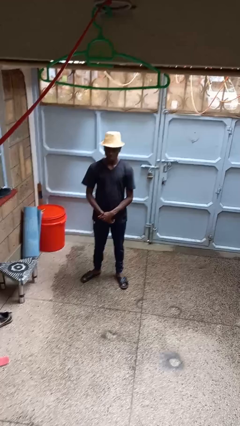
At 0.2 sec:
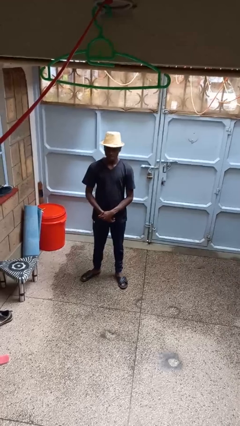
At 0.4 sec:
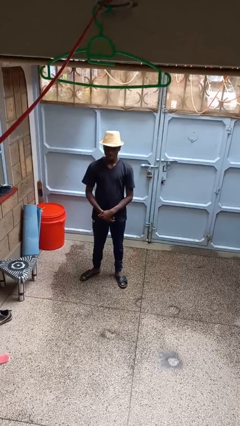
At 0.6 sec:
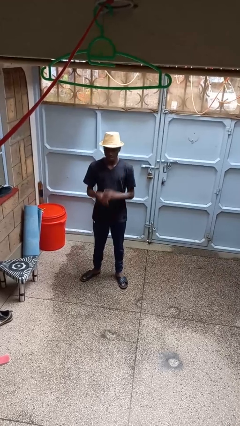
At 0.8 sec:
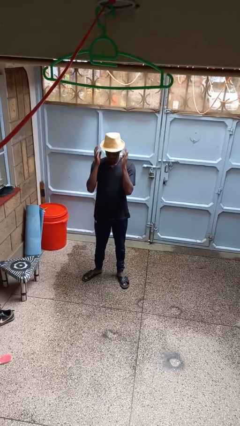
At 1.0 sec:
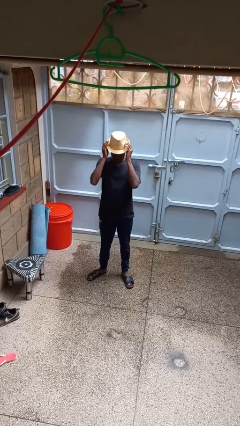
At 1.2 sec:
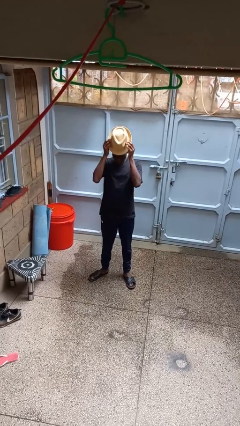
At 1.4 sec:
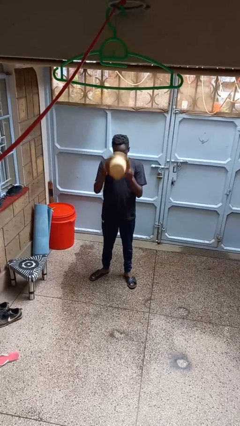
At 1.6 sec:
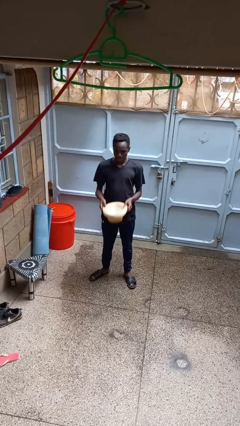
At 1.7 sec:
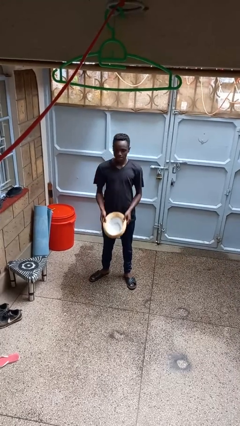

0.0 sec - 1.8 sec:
person takes off hat

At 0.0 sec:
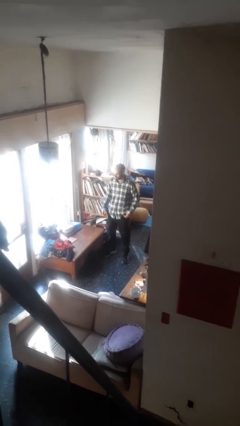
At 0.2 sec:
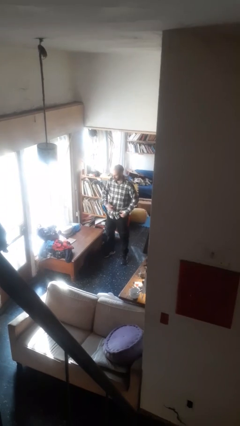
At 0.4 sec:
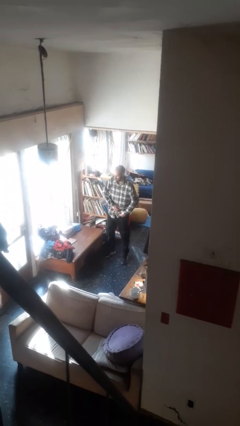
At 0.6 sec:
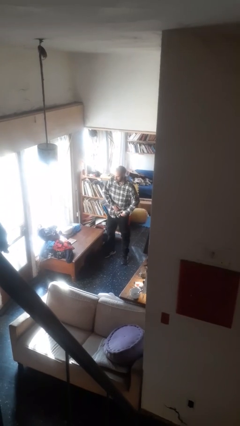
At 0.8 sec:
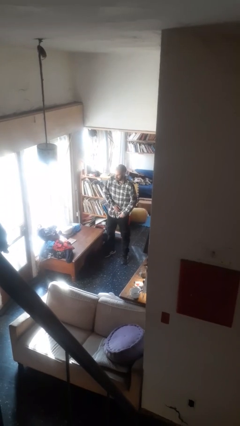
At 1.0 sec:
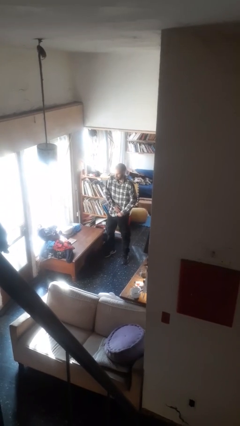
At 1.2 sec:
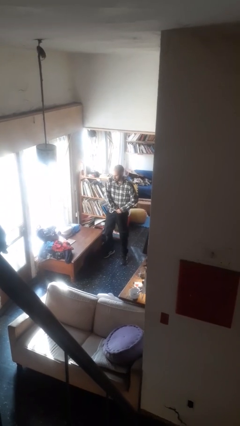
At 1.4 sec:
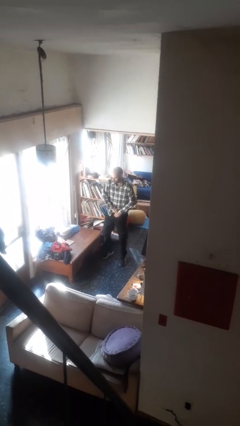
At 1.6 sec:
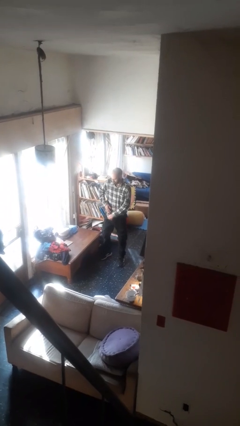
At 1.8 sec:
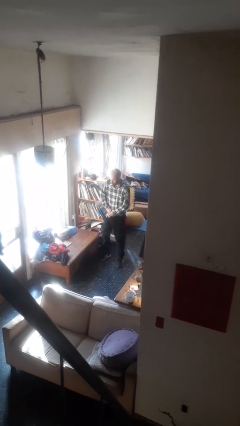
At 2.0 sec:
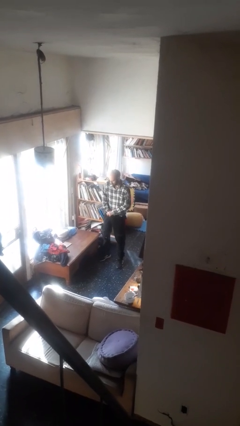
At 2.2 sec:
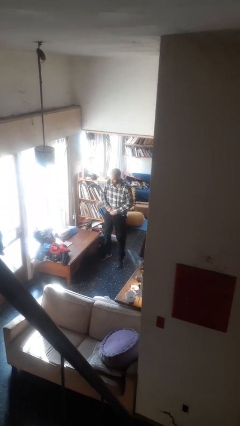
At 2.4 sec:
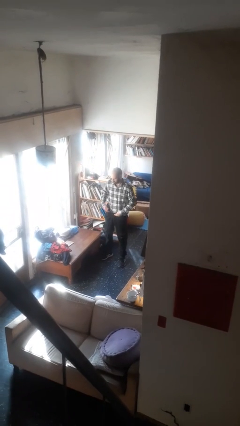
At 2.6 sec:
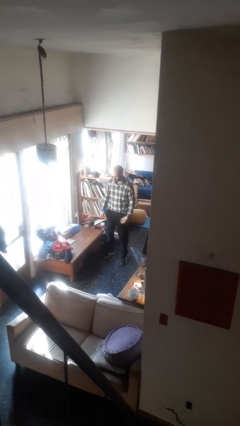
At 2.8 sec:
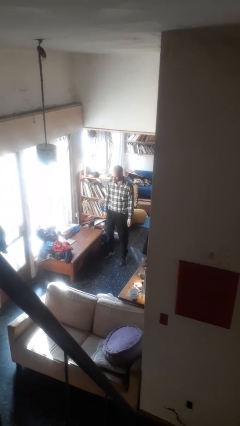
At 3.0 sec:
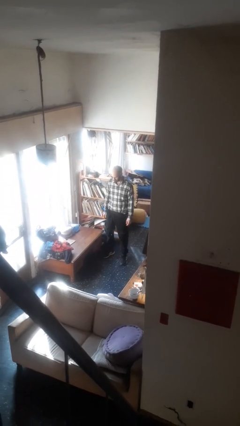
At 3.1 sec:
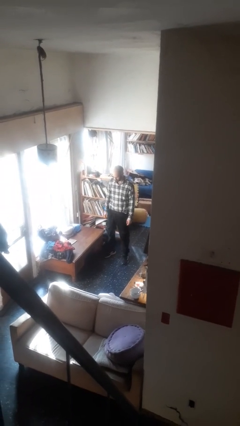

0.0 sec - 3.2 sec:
person tucks in shirt

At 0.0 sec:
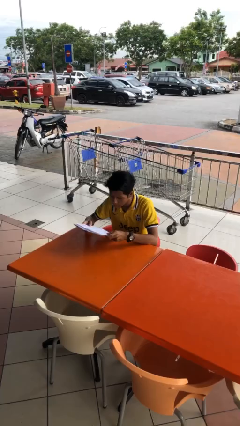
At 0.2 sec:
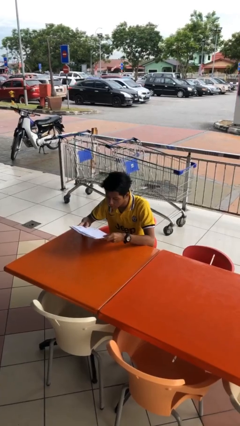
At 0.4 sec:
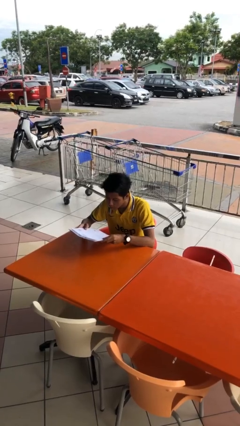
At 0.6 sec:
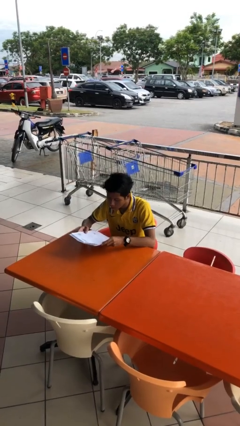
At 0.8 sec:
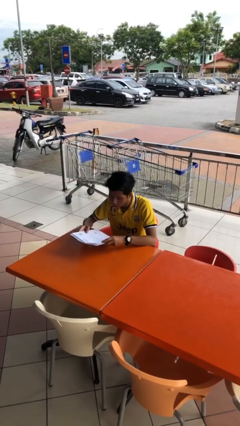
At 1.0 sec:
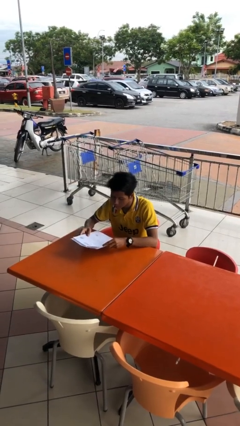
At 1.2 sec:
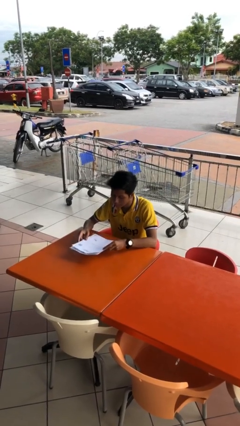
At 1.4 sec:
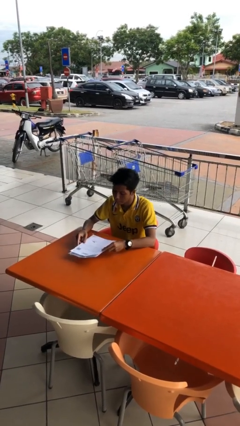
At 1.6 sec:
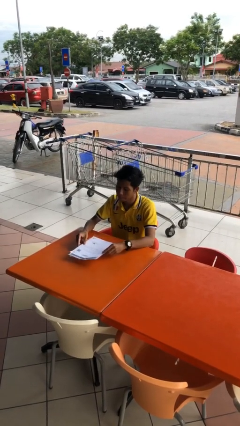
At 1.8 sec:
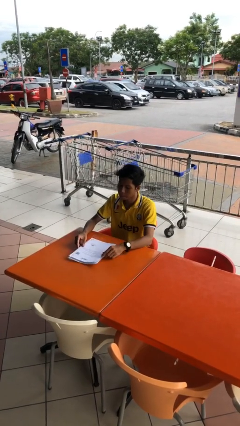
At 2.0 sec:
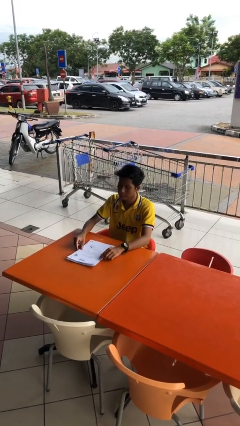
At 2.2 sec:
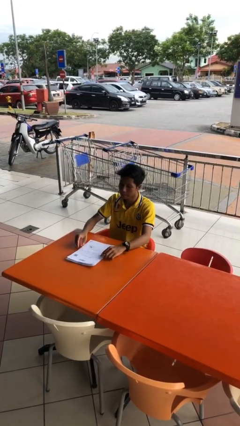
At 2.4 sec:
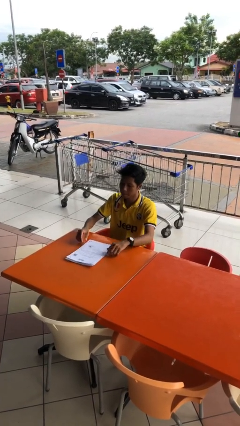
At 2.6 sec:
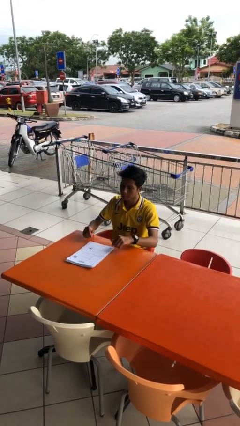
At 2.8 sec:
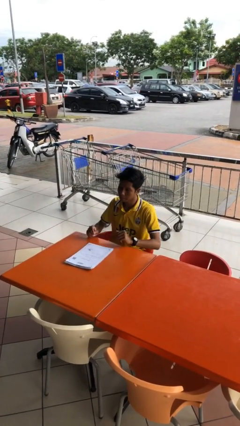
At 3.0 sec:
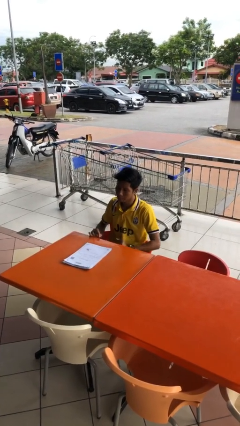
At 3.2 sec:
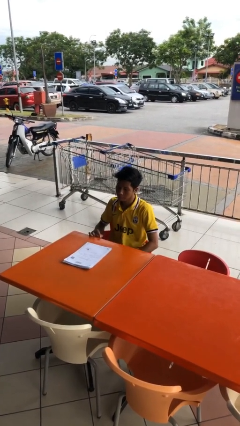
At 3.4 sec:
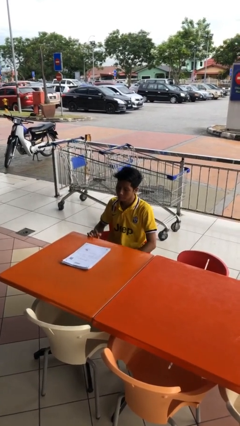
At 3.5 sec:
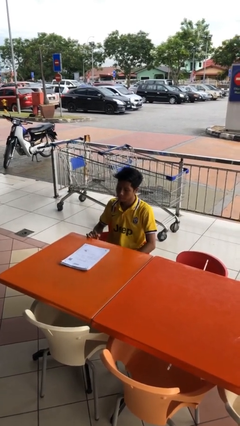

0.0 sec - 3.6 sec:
person puts down object on table

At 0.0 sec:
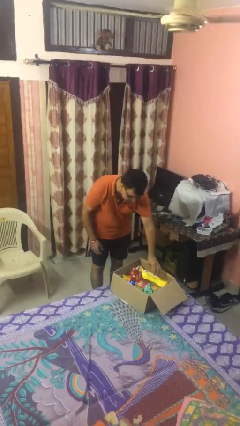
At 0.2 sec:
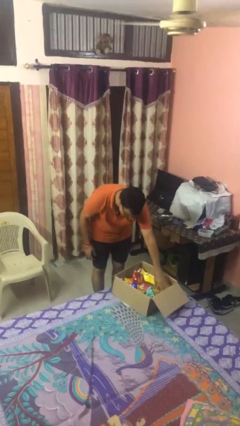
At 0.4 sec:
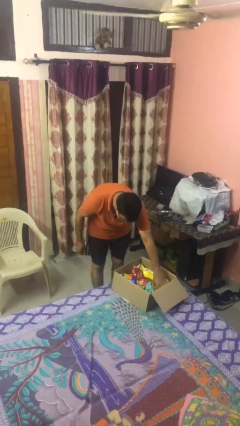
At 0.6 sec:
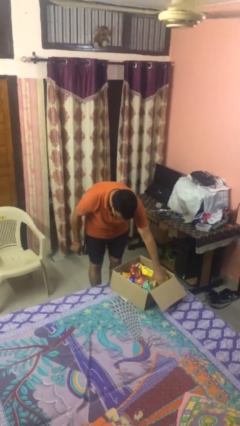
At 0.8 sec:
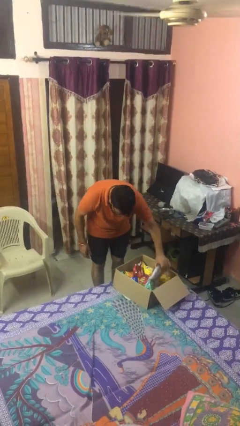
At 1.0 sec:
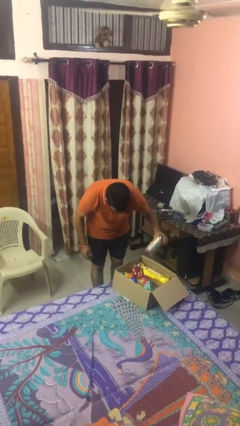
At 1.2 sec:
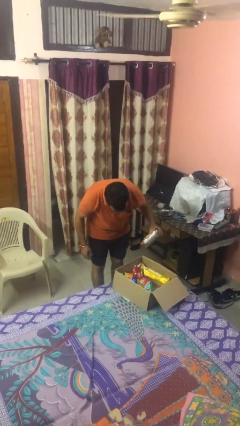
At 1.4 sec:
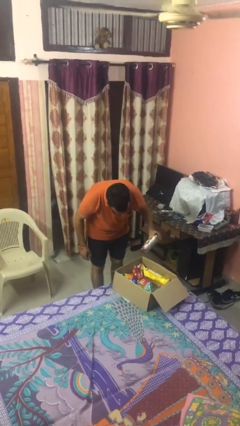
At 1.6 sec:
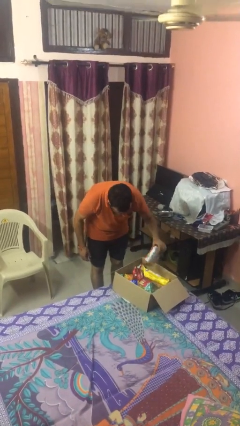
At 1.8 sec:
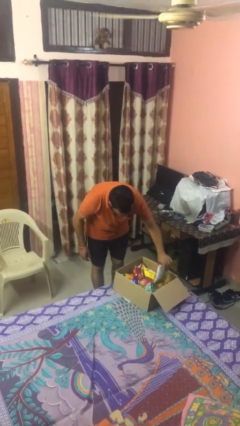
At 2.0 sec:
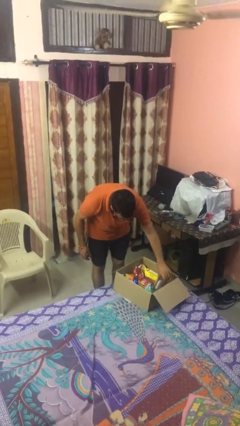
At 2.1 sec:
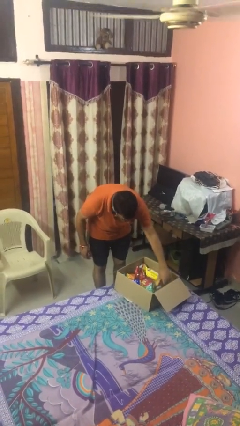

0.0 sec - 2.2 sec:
person searches in box

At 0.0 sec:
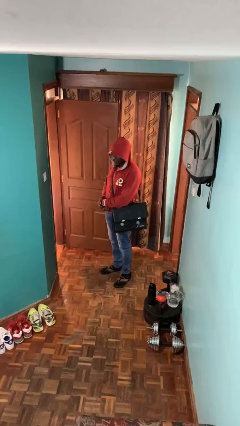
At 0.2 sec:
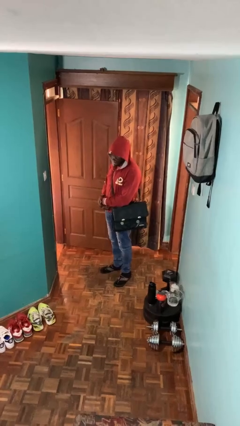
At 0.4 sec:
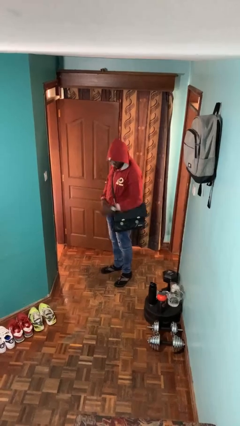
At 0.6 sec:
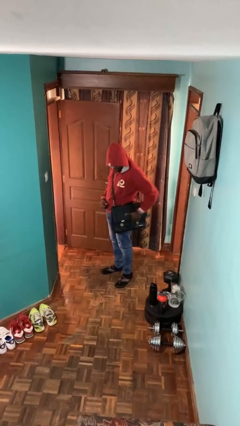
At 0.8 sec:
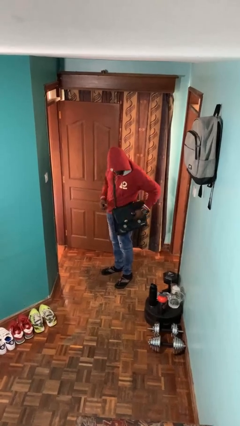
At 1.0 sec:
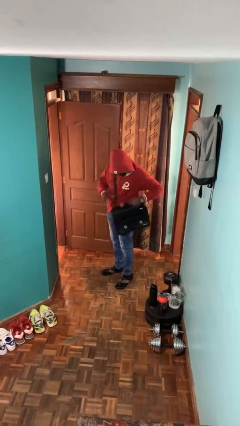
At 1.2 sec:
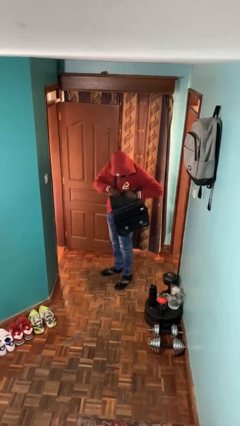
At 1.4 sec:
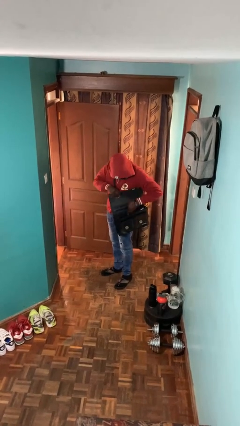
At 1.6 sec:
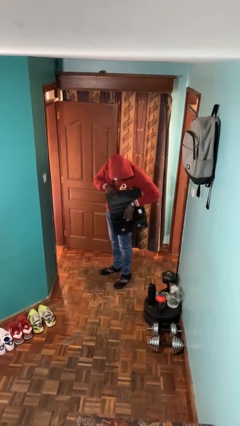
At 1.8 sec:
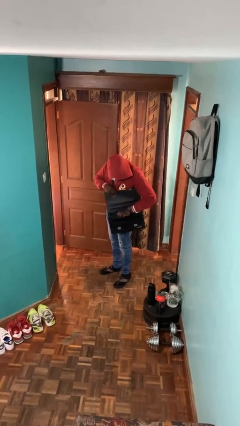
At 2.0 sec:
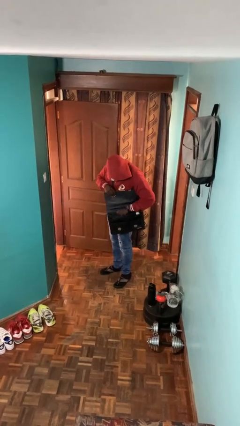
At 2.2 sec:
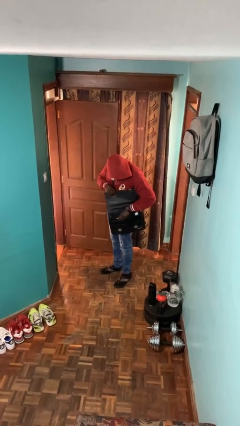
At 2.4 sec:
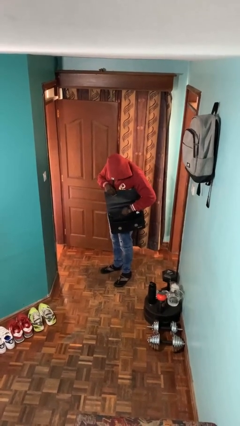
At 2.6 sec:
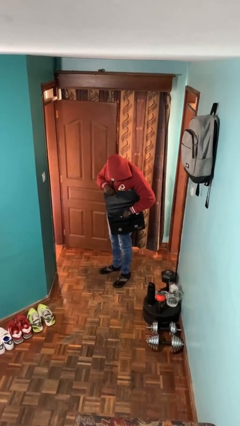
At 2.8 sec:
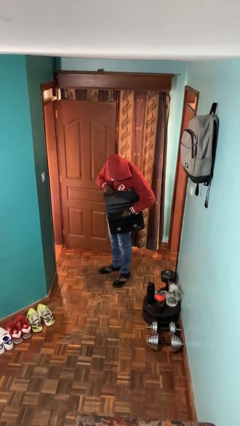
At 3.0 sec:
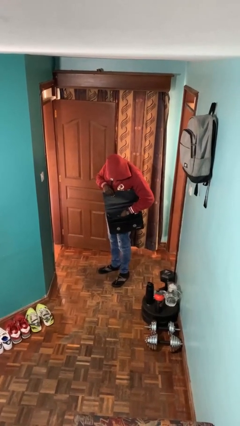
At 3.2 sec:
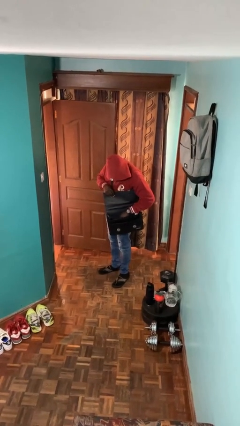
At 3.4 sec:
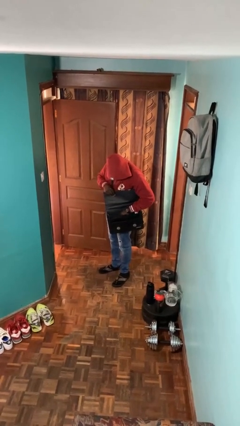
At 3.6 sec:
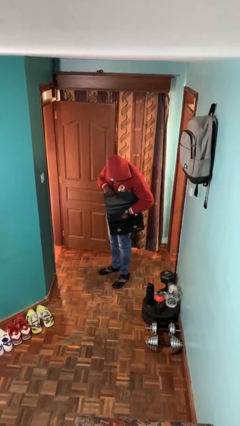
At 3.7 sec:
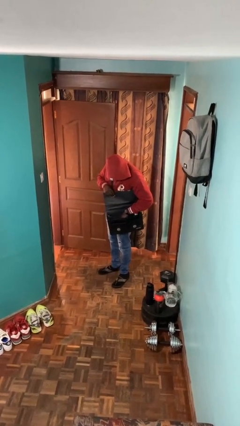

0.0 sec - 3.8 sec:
person searches in purse

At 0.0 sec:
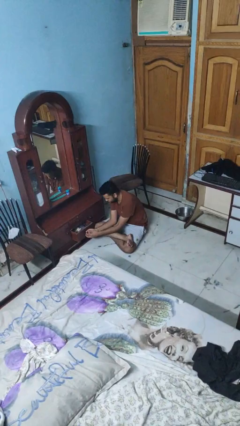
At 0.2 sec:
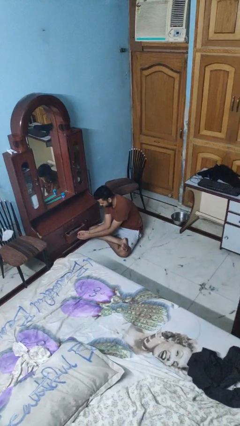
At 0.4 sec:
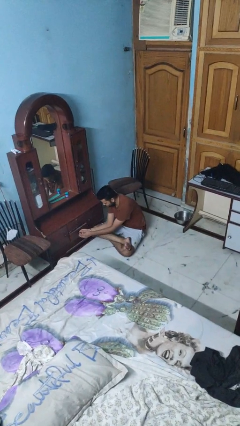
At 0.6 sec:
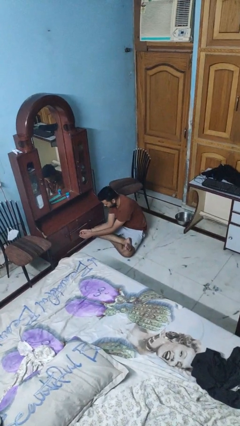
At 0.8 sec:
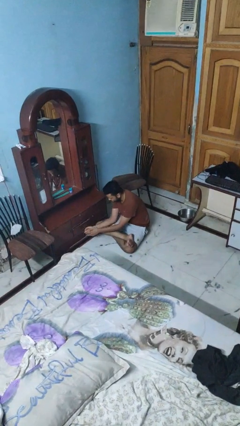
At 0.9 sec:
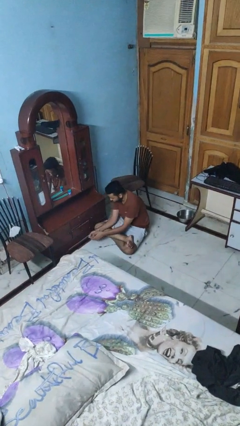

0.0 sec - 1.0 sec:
person closes dresser drawer

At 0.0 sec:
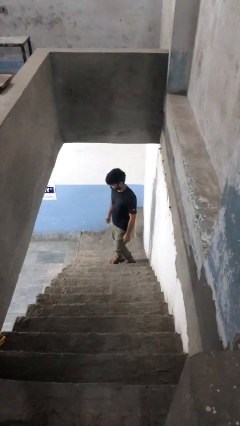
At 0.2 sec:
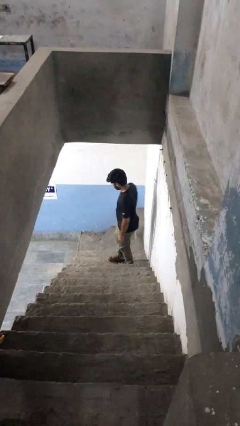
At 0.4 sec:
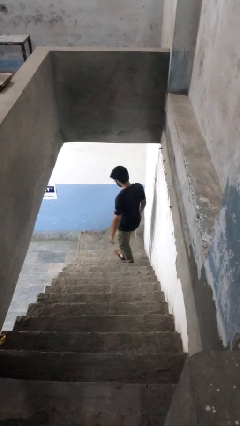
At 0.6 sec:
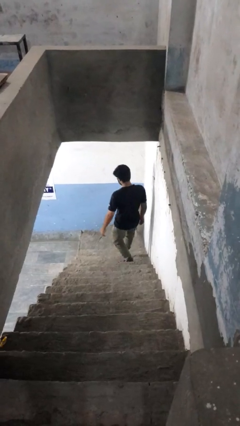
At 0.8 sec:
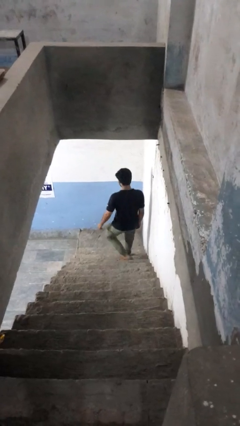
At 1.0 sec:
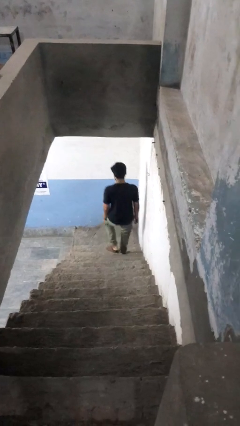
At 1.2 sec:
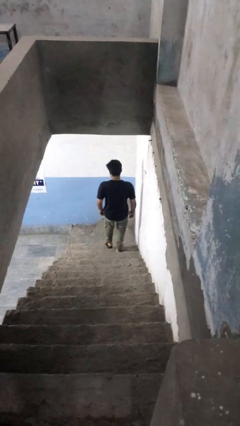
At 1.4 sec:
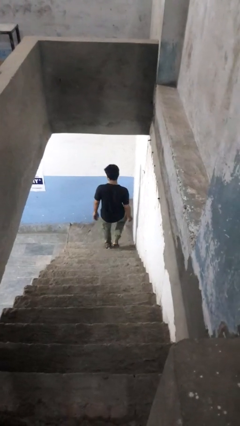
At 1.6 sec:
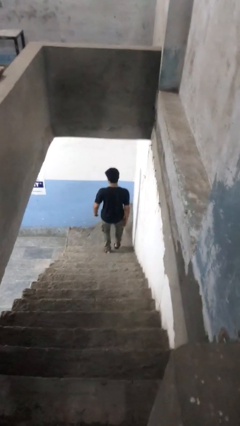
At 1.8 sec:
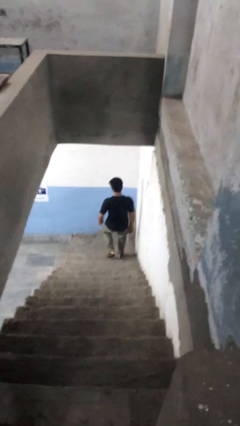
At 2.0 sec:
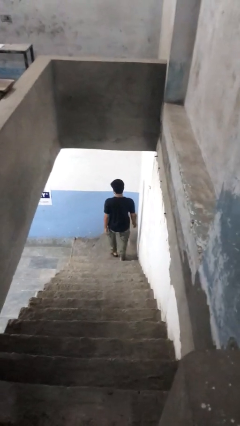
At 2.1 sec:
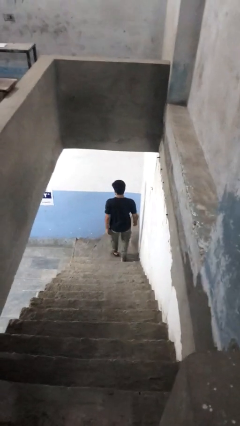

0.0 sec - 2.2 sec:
person climbs down stairs
